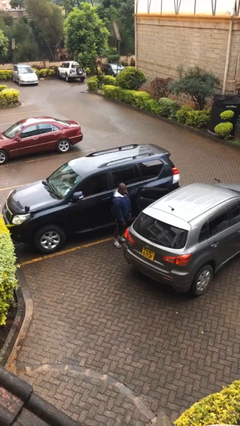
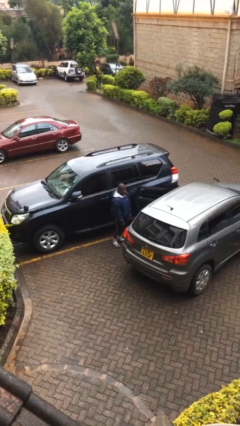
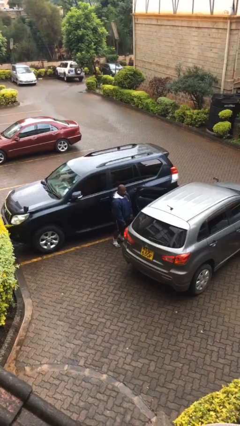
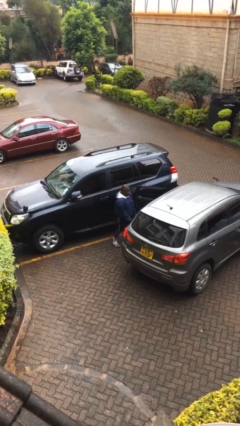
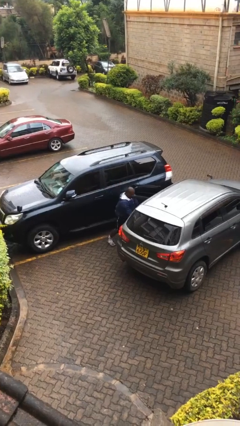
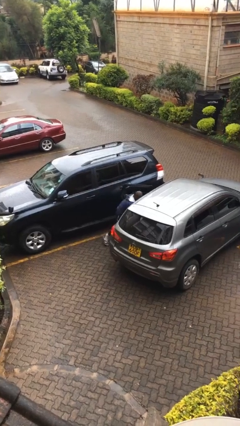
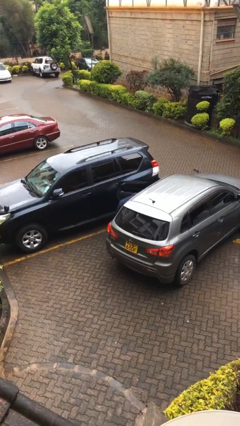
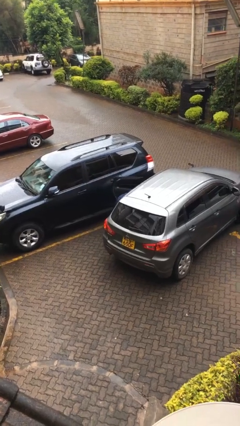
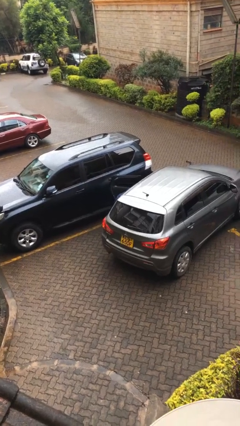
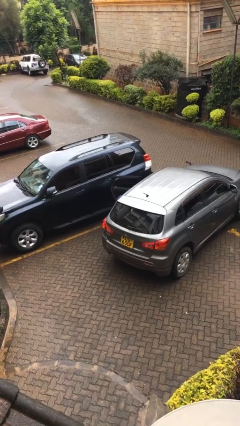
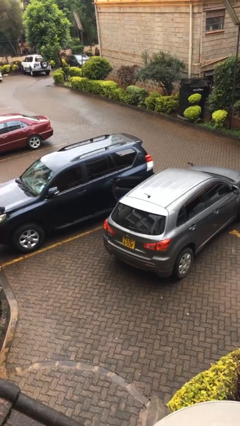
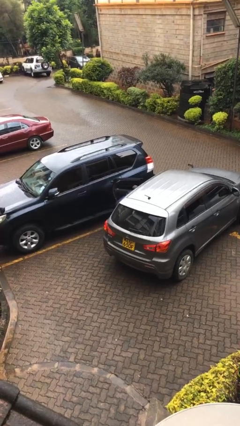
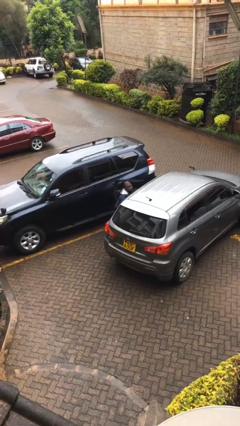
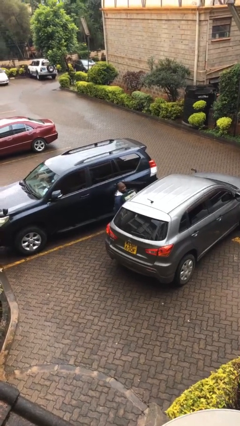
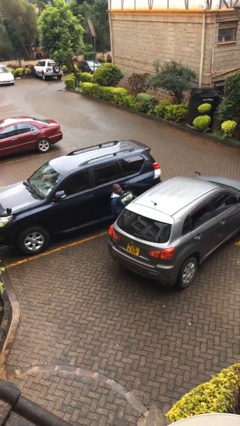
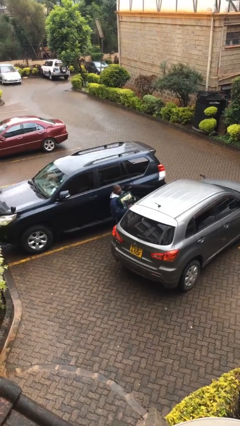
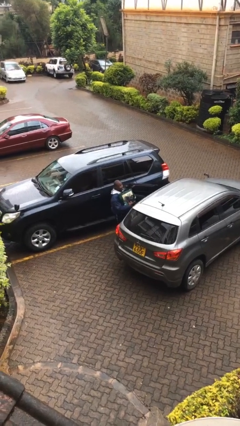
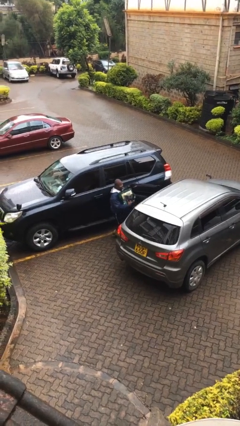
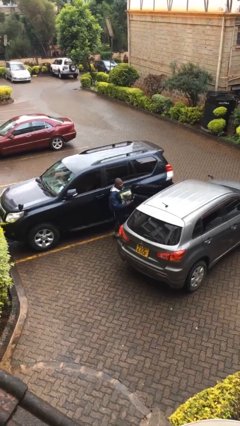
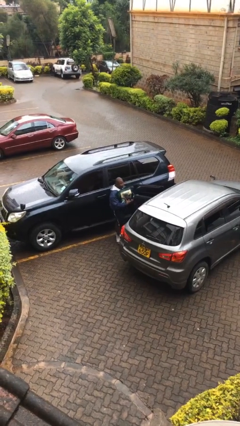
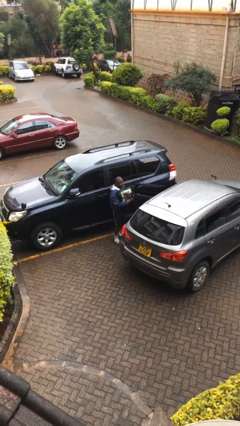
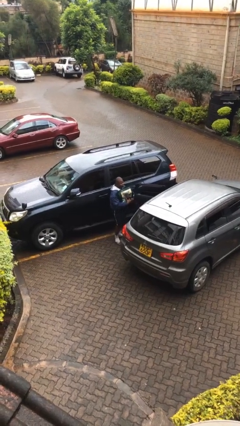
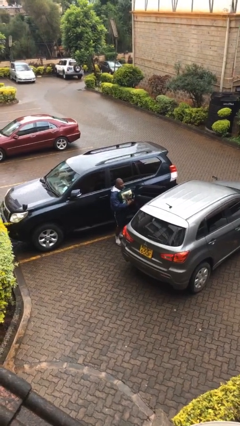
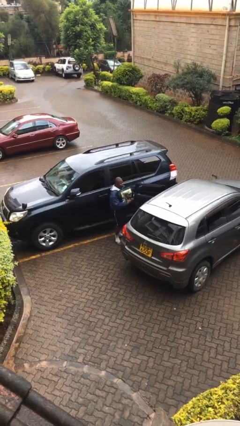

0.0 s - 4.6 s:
person unloads car

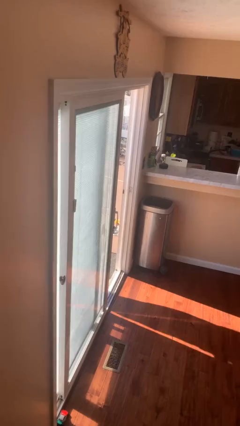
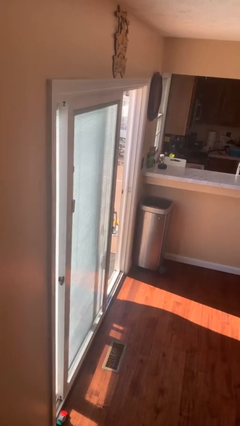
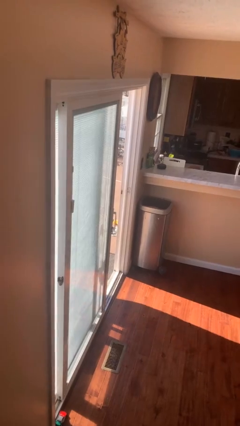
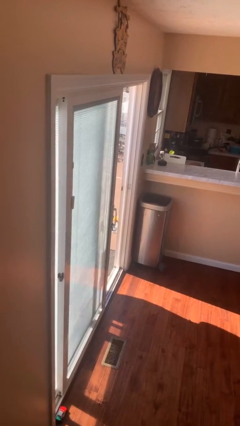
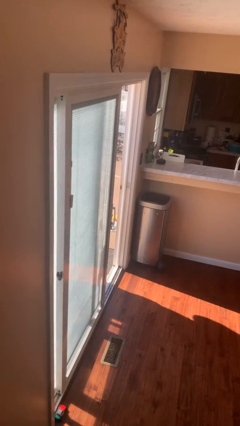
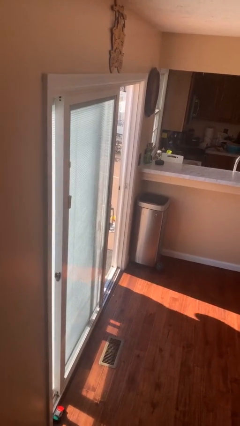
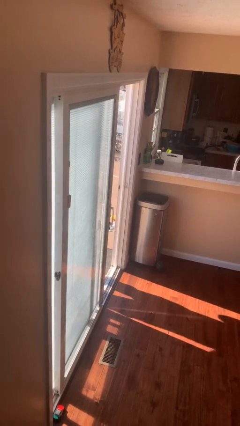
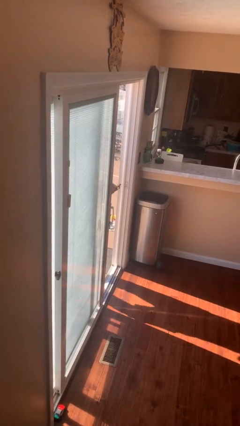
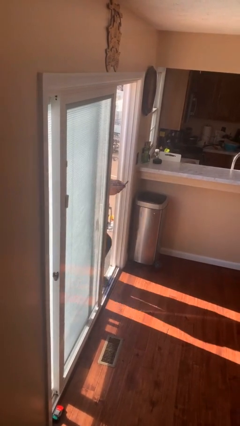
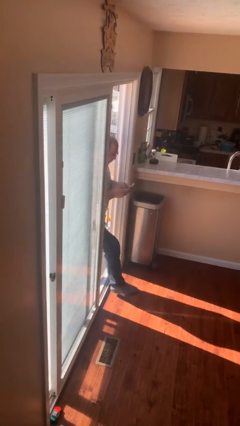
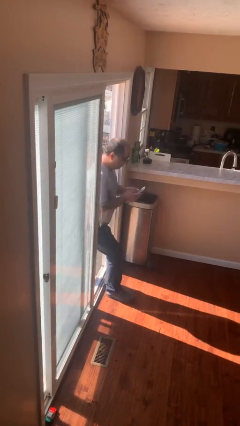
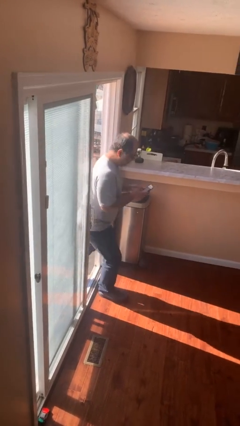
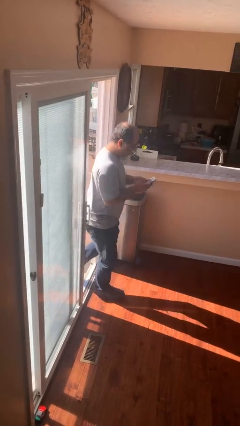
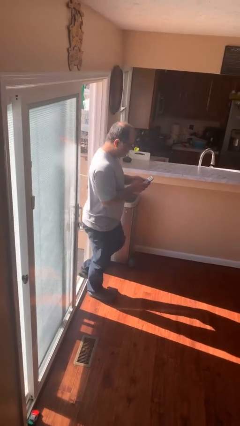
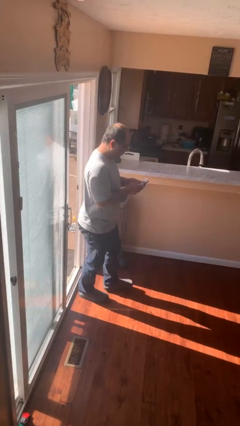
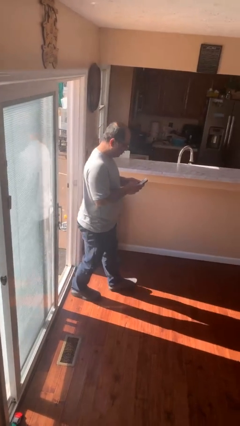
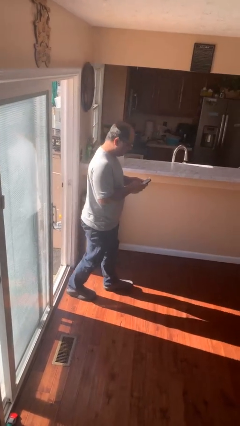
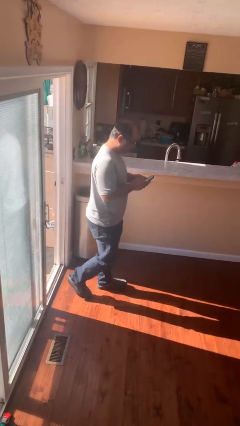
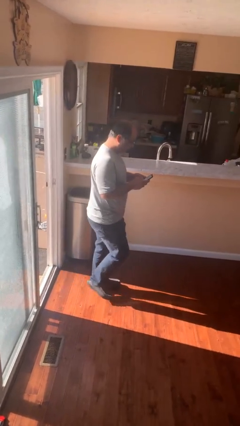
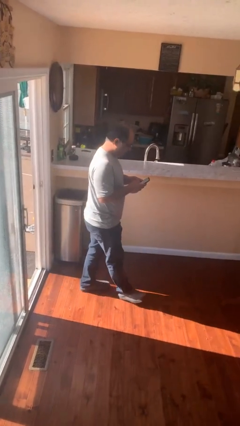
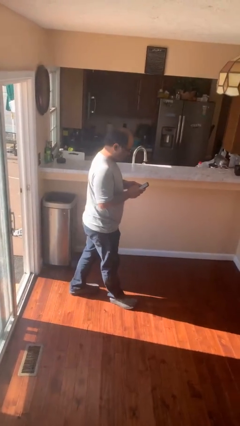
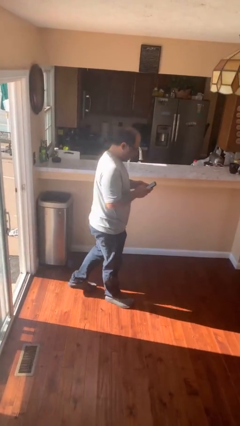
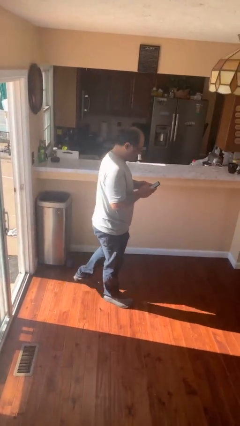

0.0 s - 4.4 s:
person enters scene through structure

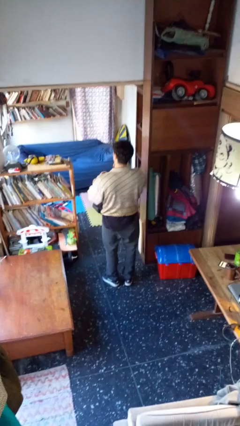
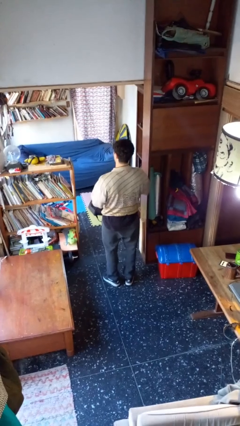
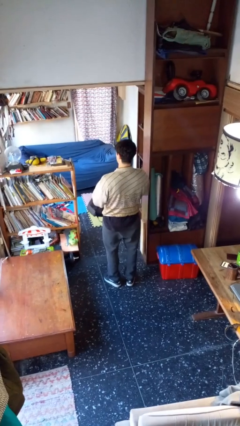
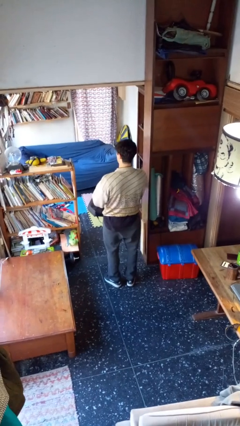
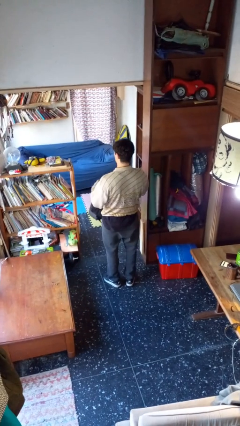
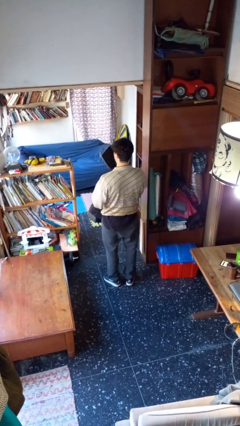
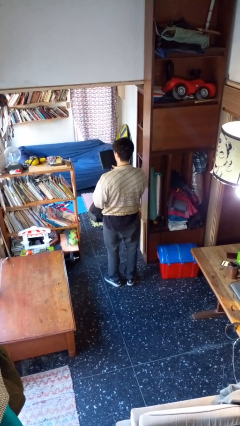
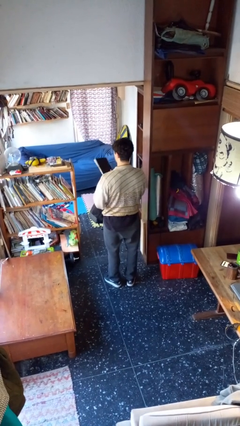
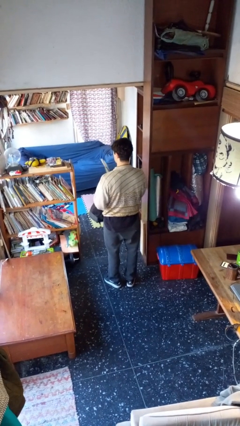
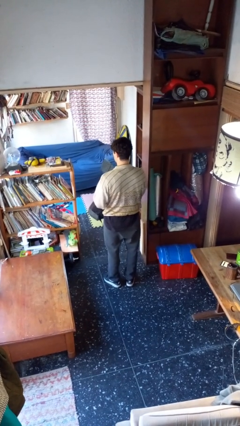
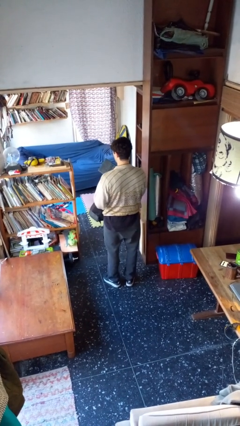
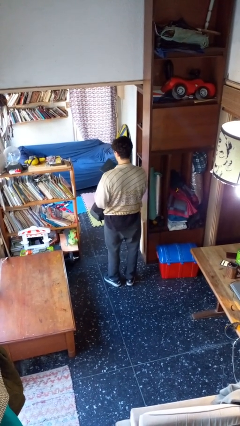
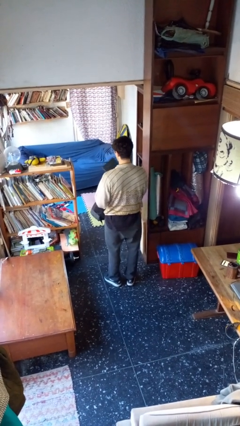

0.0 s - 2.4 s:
person takes object from backpack

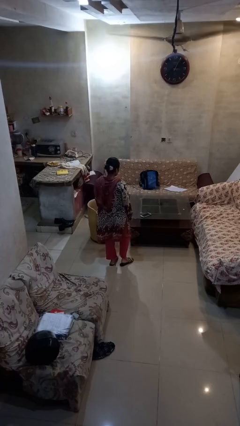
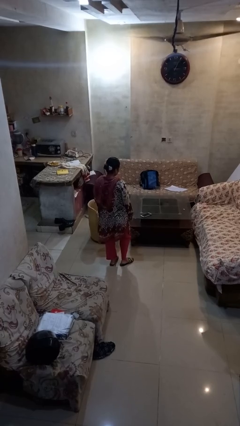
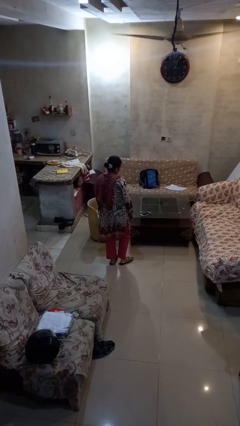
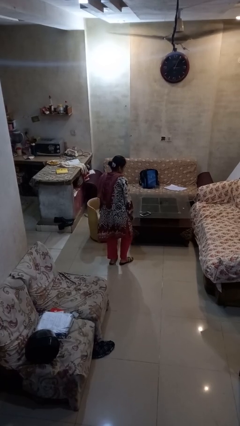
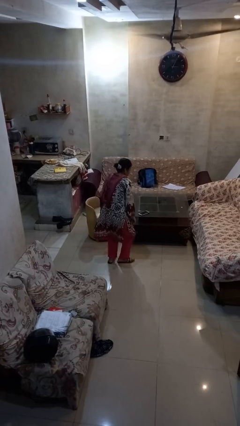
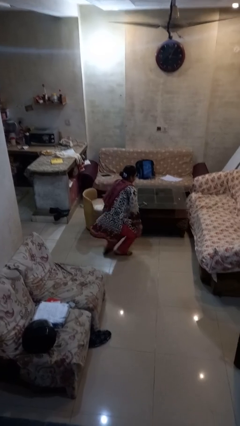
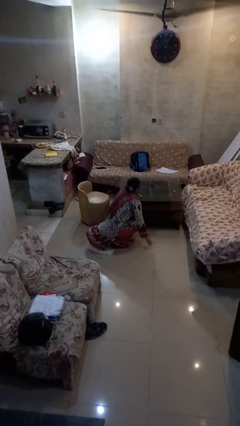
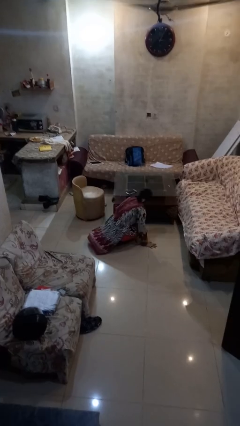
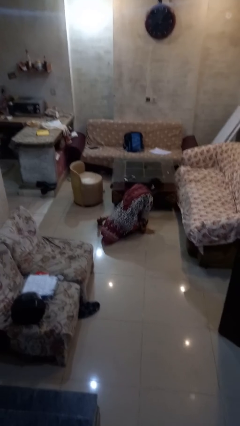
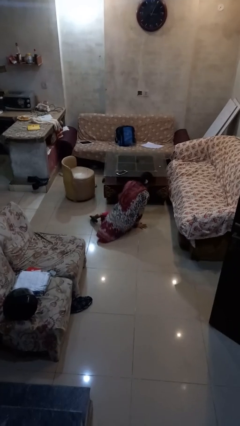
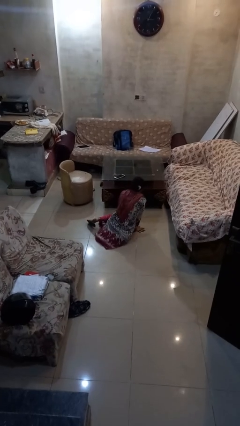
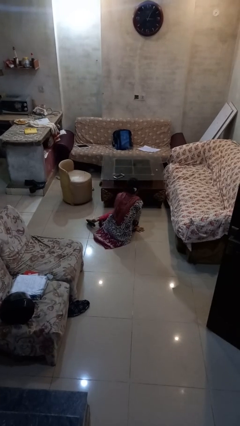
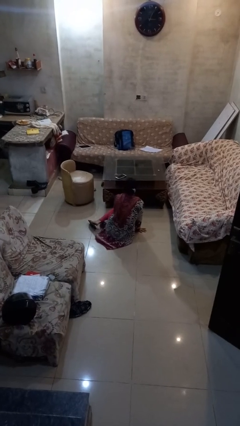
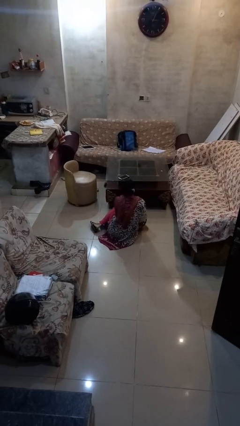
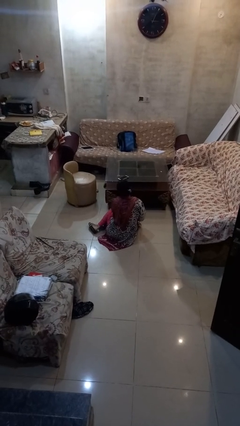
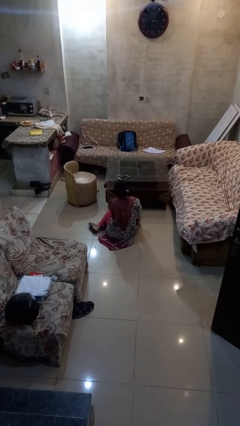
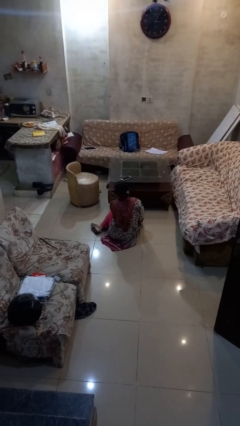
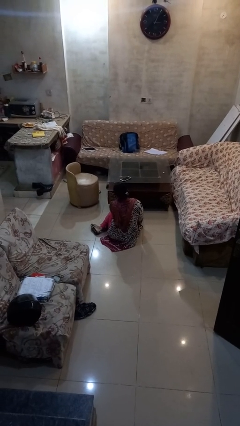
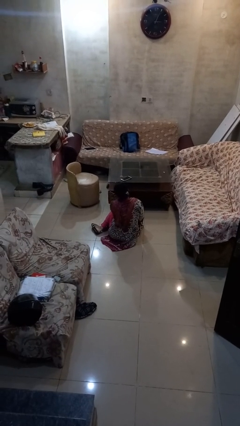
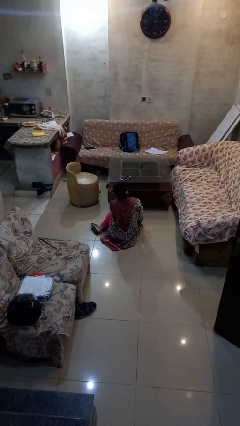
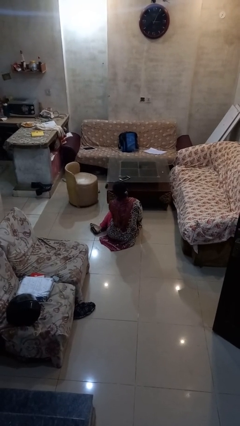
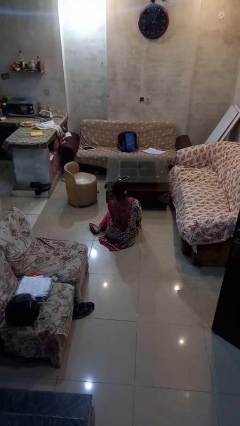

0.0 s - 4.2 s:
person falls while standing

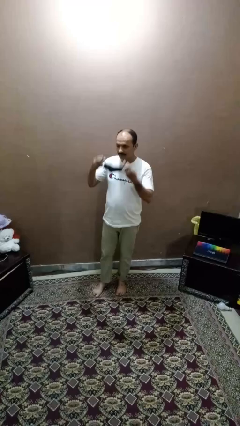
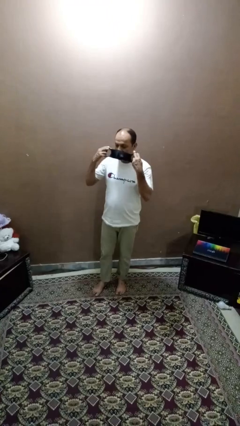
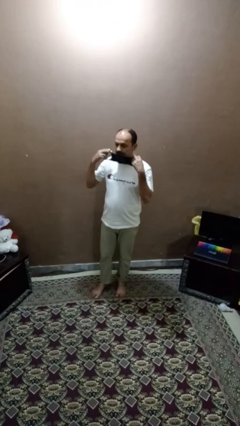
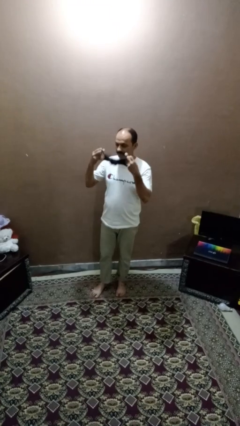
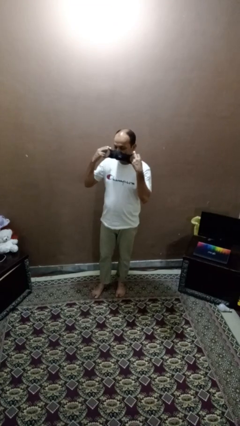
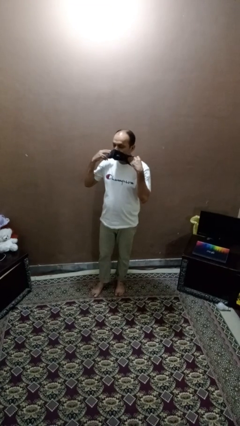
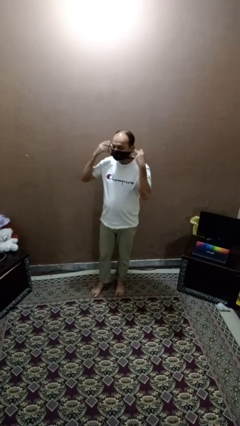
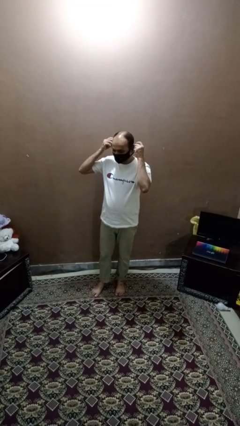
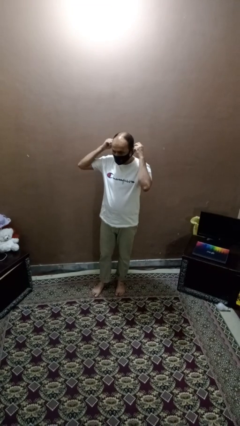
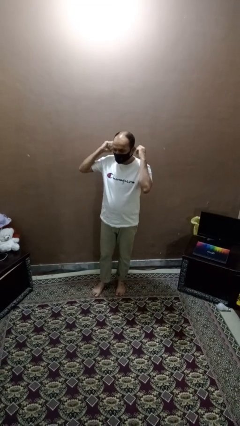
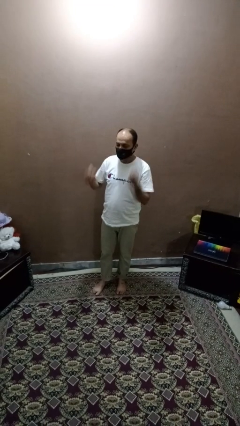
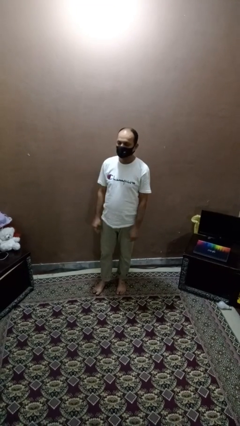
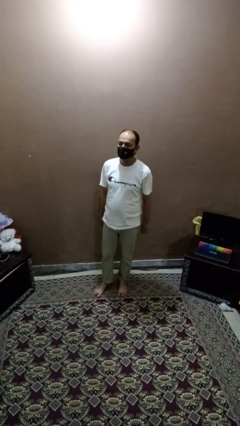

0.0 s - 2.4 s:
person puts on facemask
